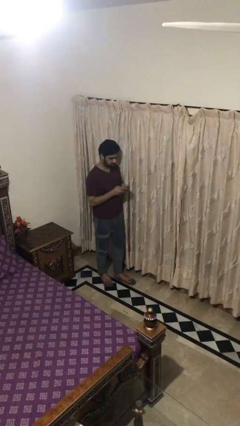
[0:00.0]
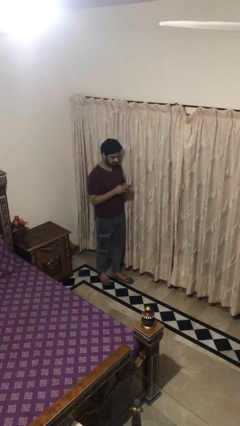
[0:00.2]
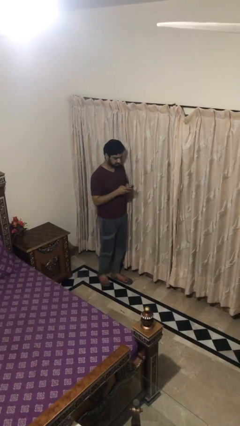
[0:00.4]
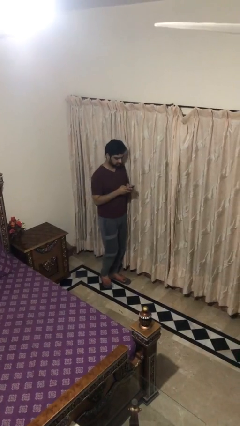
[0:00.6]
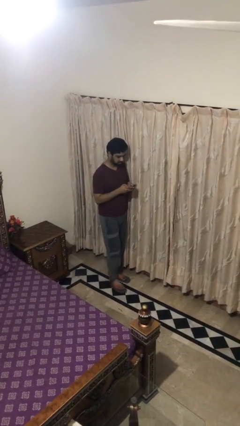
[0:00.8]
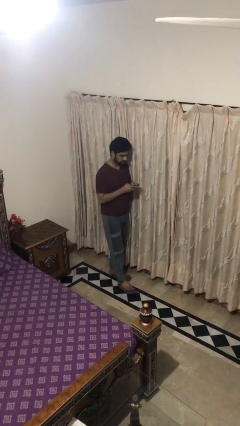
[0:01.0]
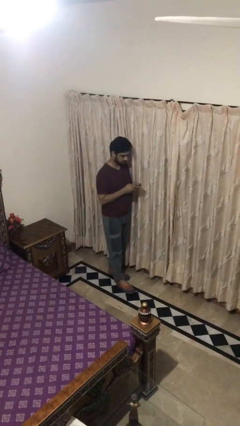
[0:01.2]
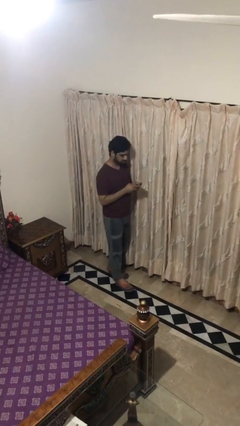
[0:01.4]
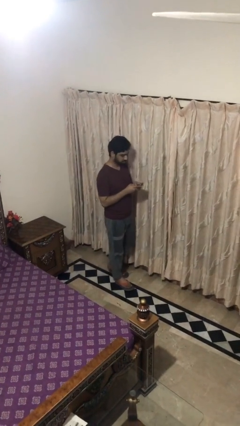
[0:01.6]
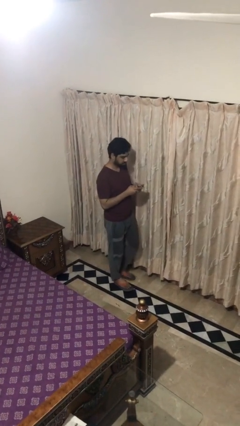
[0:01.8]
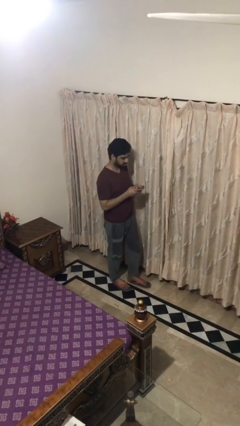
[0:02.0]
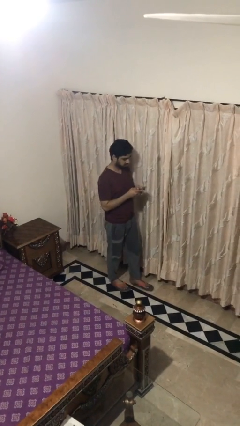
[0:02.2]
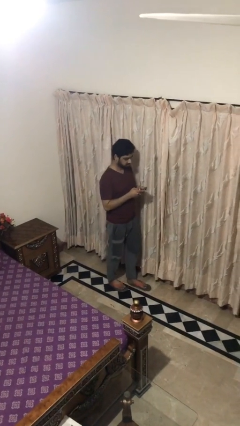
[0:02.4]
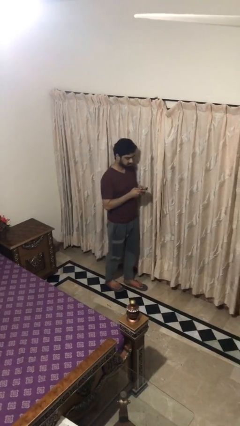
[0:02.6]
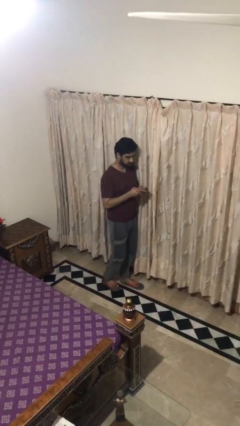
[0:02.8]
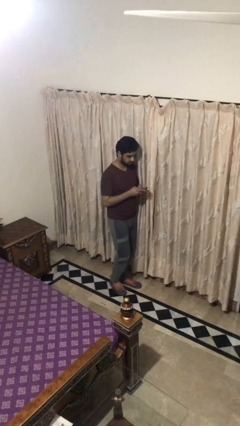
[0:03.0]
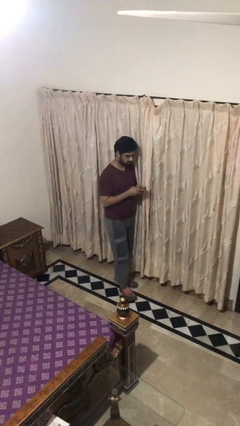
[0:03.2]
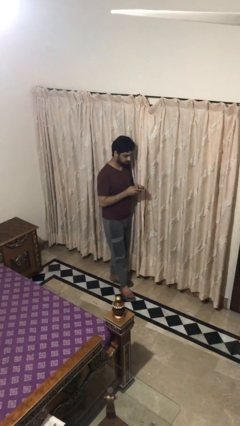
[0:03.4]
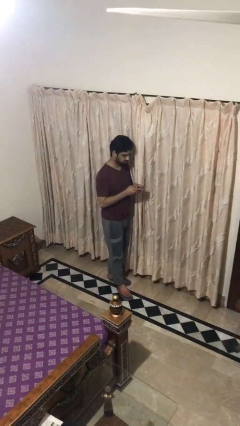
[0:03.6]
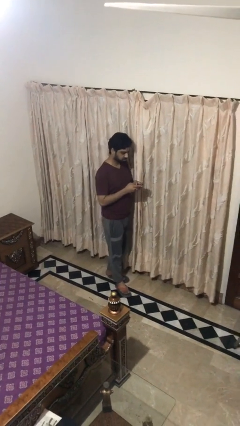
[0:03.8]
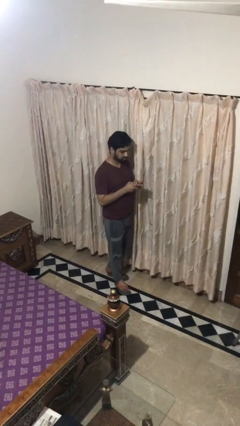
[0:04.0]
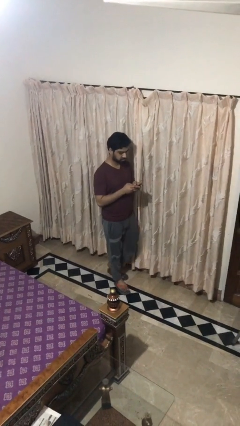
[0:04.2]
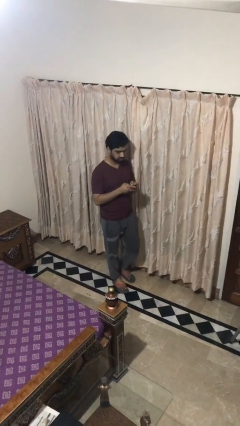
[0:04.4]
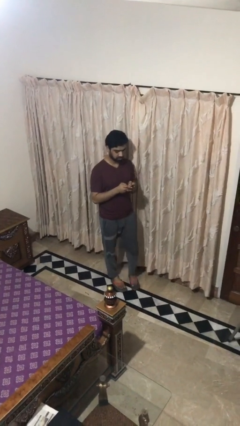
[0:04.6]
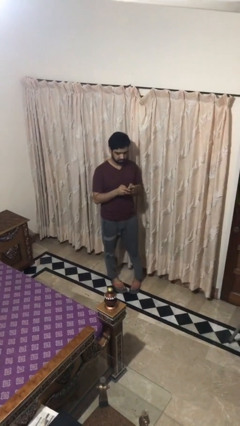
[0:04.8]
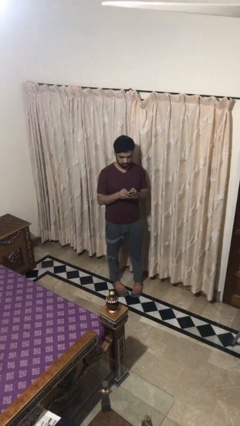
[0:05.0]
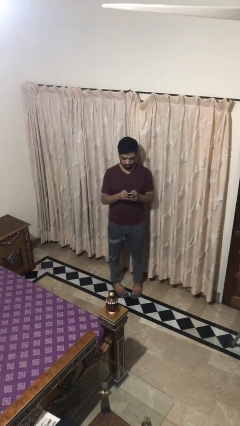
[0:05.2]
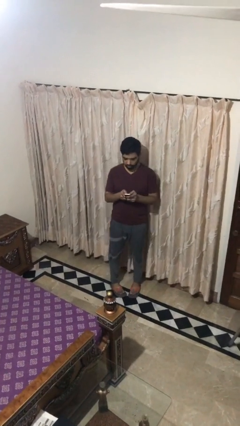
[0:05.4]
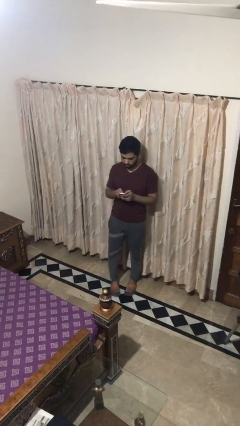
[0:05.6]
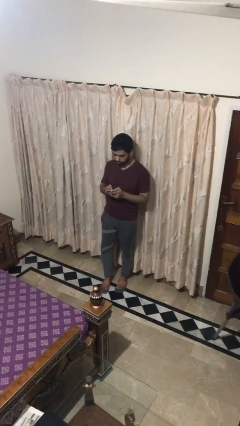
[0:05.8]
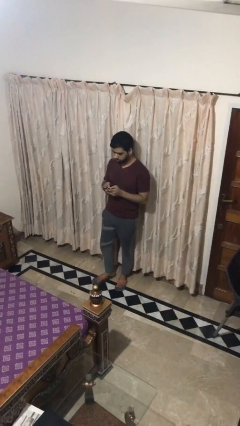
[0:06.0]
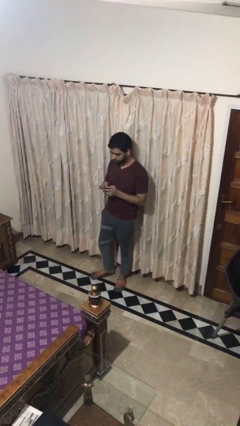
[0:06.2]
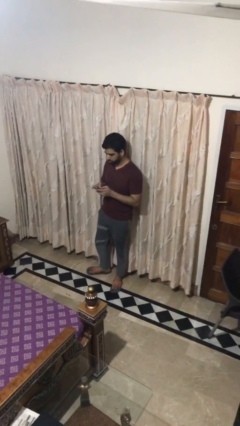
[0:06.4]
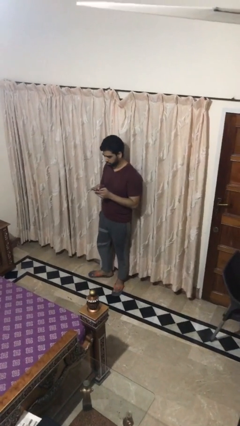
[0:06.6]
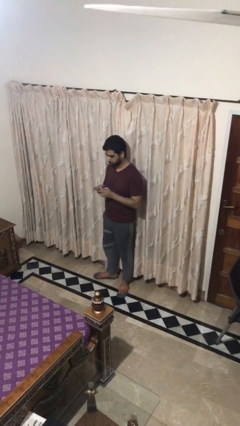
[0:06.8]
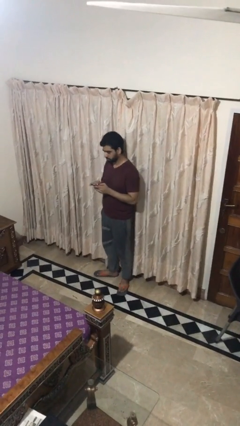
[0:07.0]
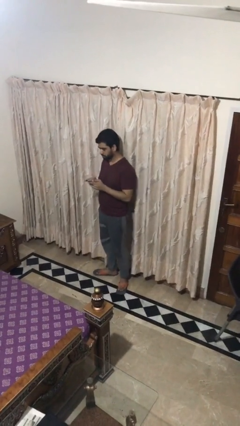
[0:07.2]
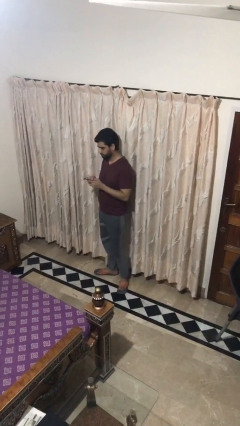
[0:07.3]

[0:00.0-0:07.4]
person texts on phone

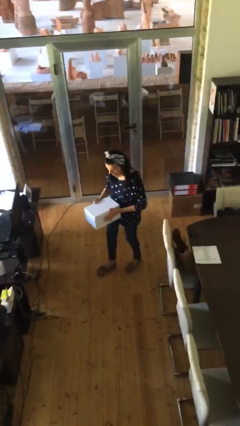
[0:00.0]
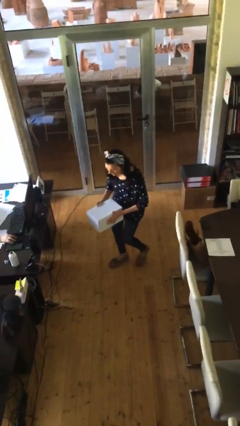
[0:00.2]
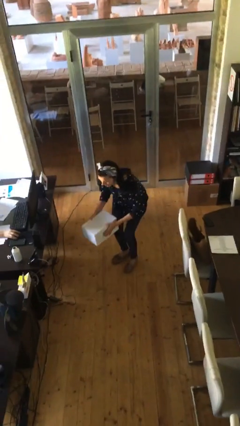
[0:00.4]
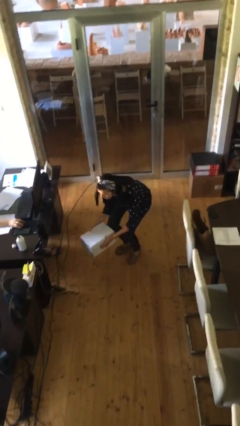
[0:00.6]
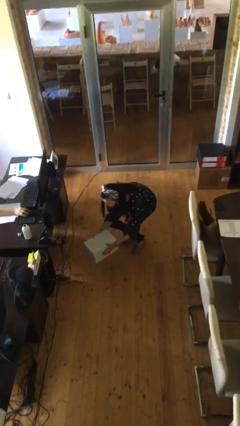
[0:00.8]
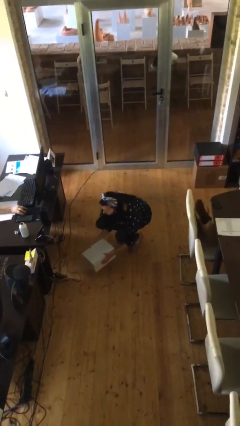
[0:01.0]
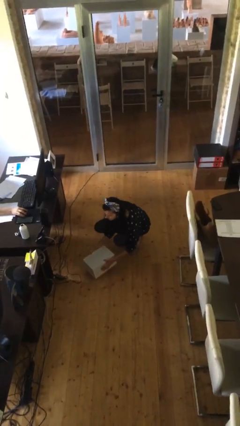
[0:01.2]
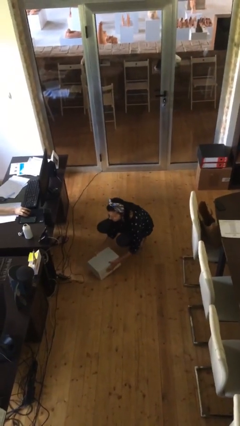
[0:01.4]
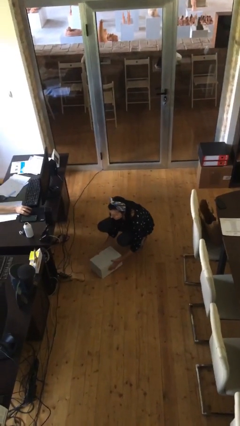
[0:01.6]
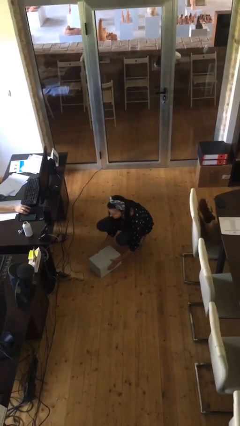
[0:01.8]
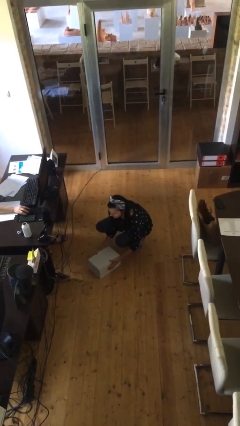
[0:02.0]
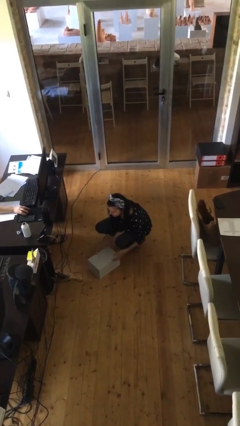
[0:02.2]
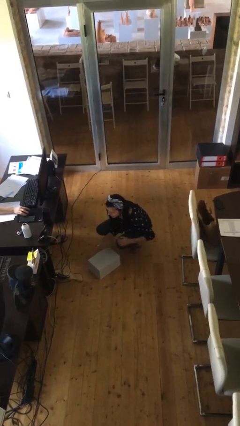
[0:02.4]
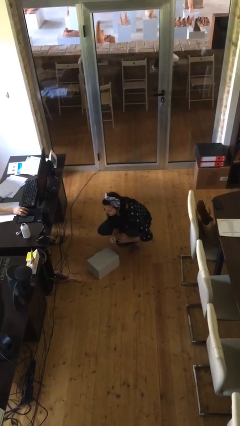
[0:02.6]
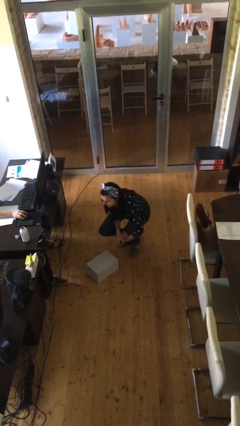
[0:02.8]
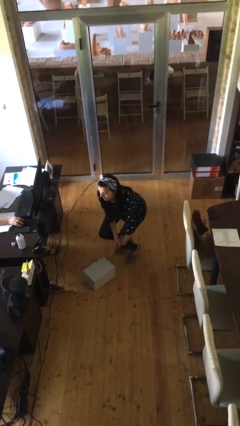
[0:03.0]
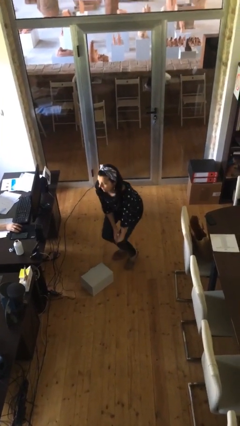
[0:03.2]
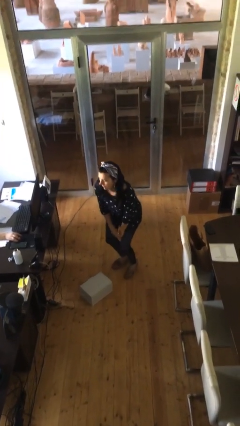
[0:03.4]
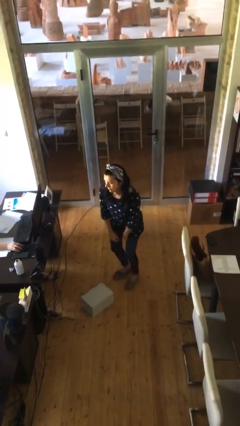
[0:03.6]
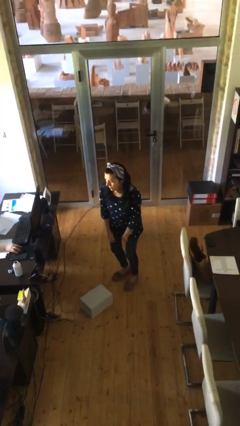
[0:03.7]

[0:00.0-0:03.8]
person puts down object on floor

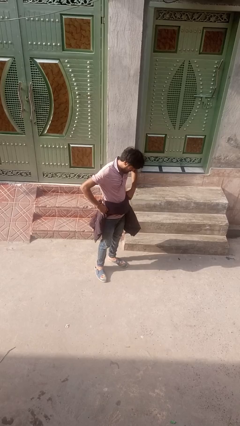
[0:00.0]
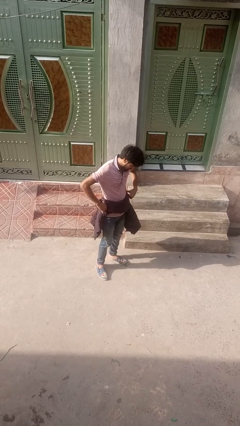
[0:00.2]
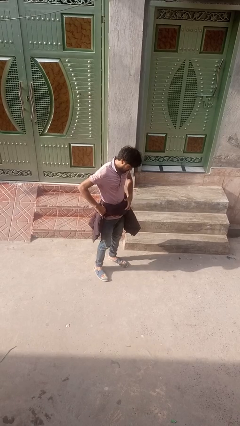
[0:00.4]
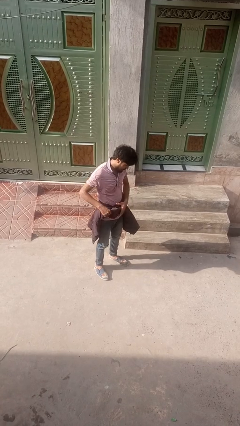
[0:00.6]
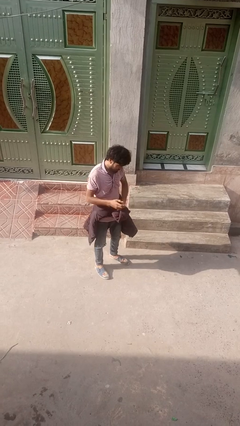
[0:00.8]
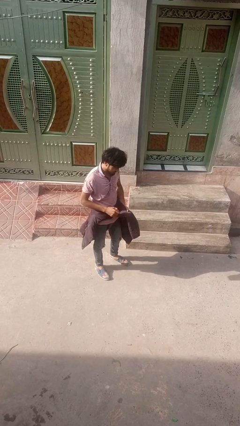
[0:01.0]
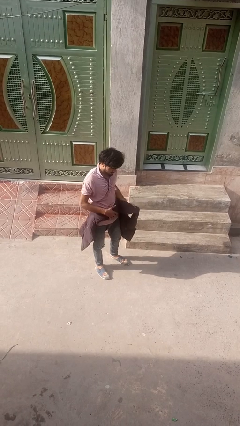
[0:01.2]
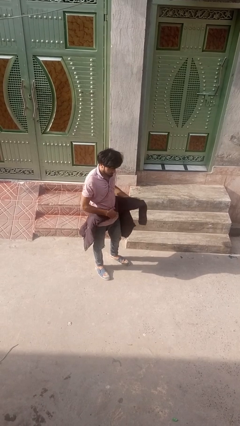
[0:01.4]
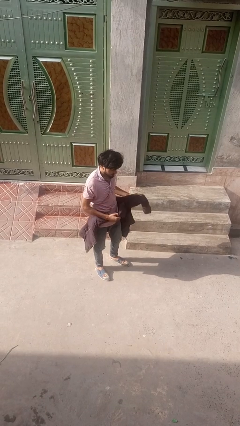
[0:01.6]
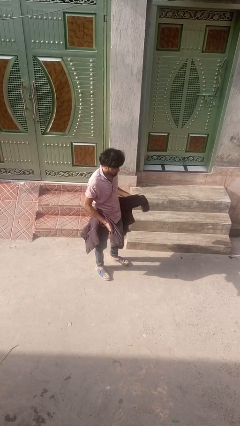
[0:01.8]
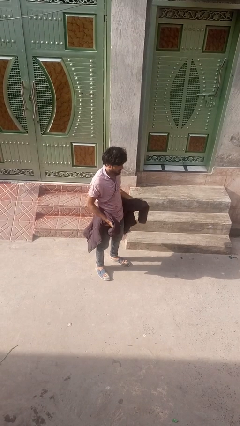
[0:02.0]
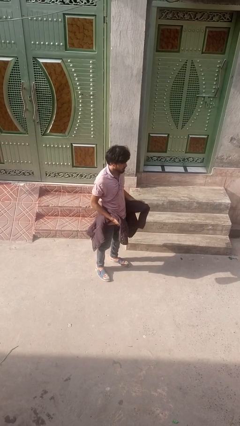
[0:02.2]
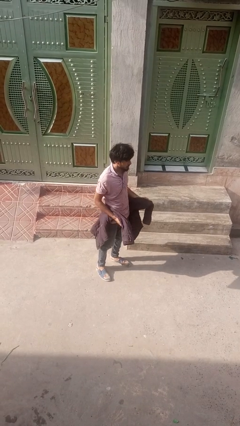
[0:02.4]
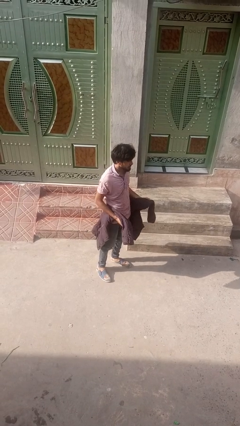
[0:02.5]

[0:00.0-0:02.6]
person unties jacket around waist

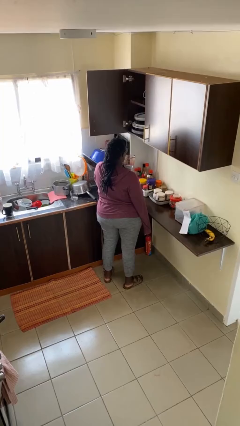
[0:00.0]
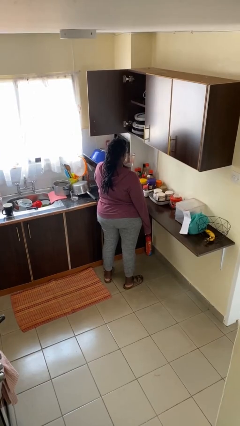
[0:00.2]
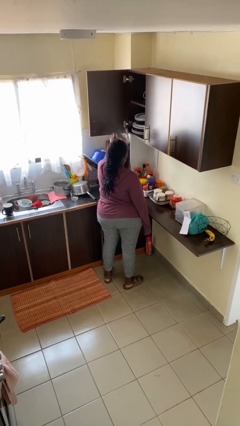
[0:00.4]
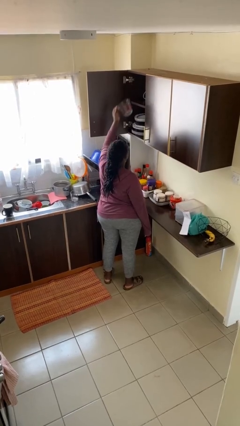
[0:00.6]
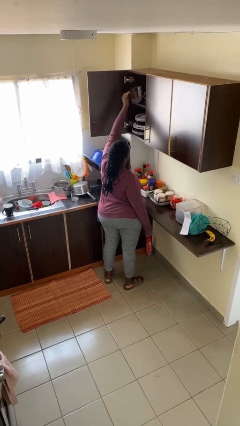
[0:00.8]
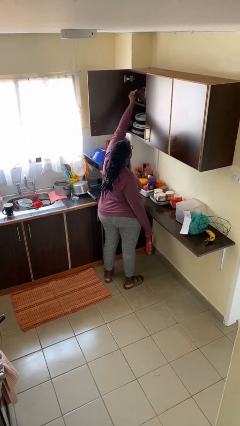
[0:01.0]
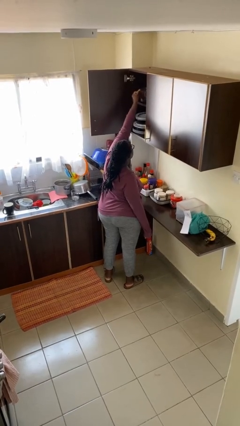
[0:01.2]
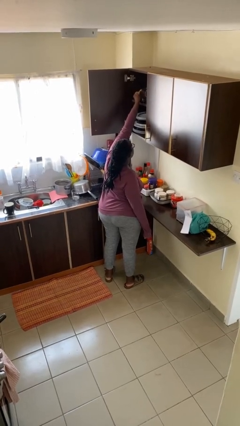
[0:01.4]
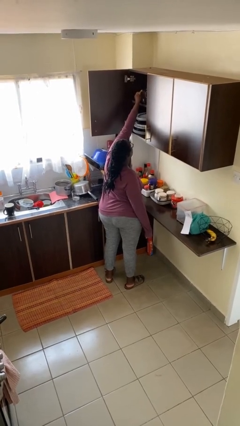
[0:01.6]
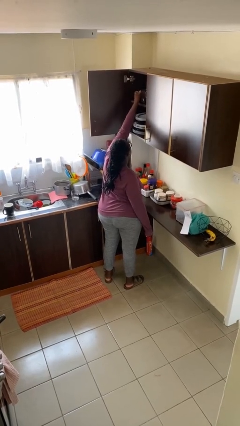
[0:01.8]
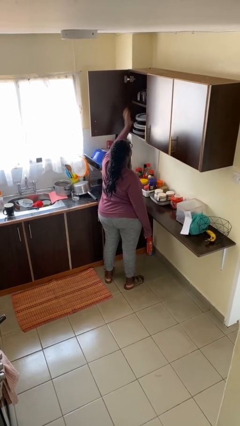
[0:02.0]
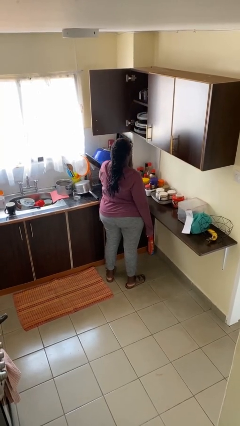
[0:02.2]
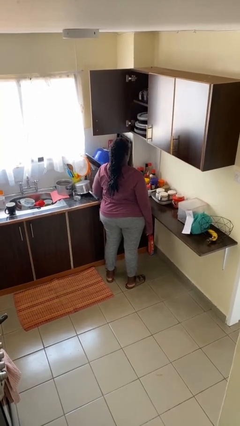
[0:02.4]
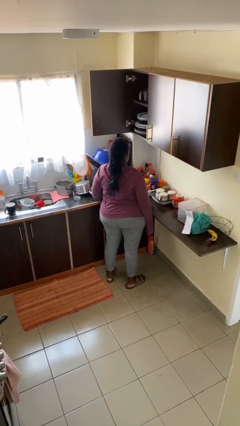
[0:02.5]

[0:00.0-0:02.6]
person puts down object into cabinet

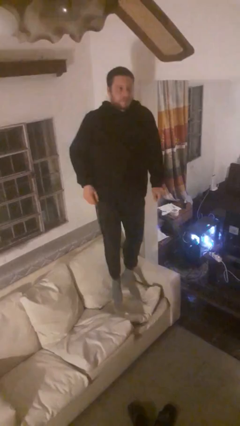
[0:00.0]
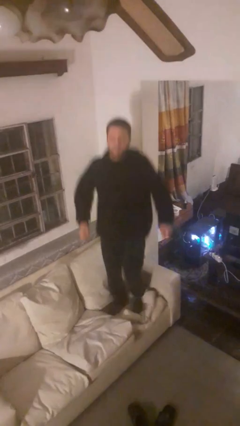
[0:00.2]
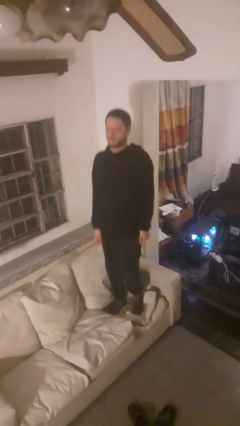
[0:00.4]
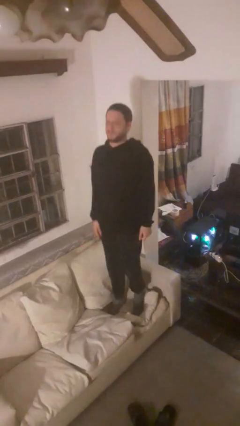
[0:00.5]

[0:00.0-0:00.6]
person jumps on couch

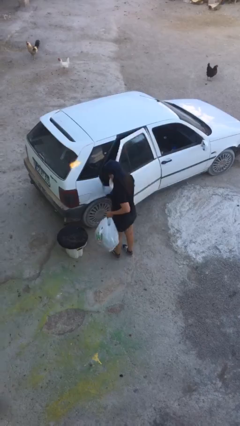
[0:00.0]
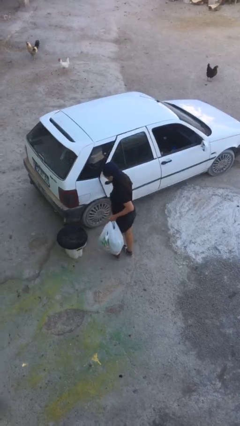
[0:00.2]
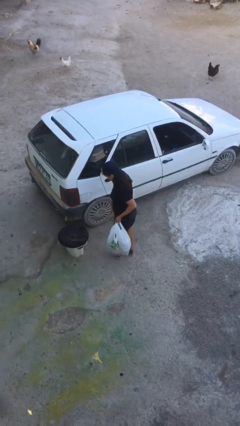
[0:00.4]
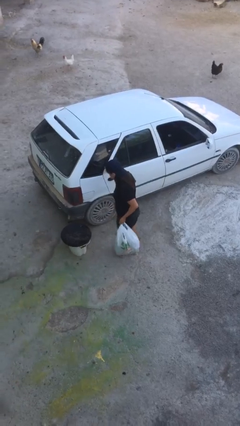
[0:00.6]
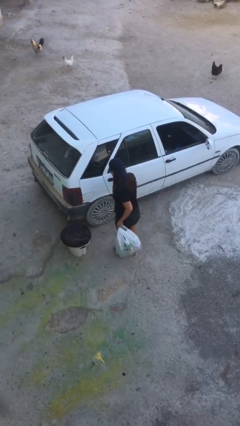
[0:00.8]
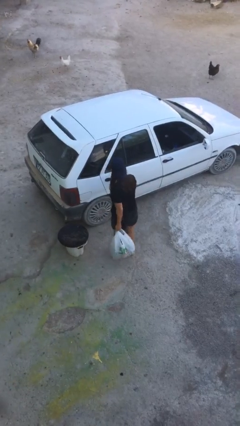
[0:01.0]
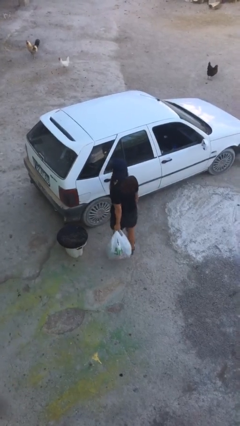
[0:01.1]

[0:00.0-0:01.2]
person closes car door
